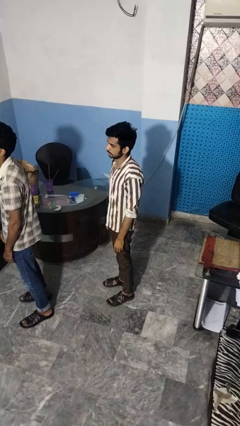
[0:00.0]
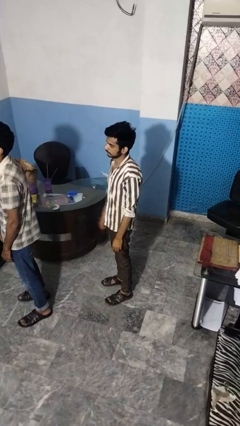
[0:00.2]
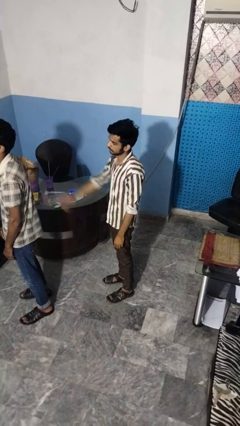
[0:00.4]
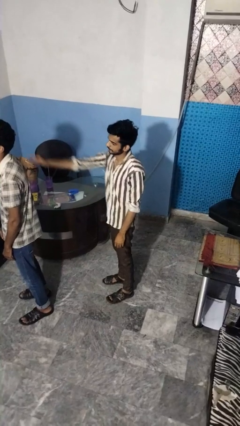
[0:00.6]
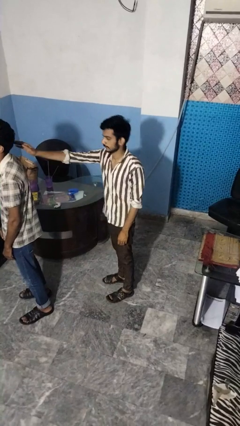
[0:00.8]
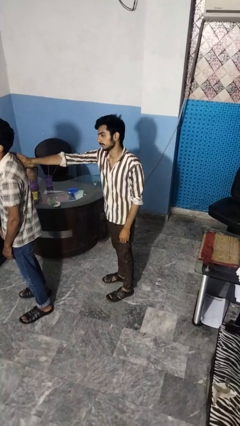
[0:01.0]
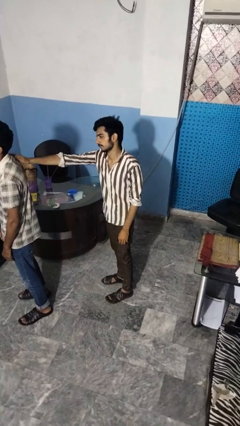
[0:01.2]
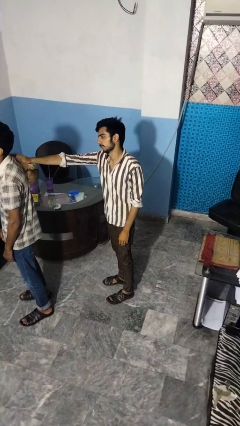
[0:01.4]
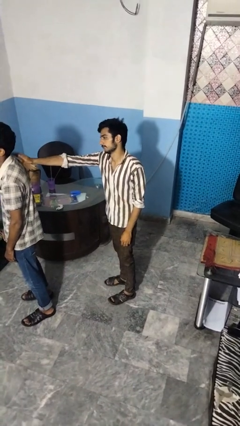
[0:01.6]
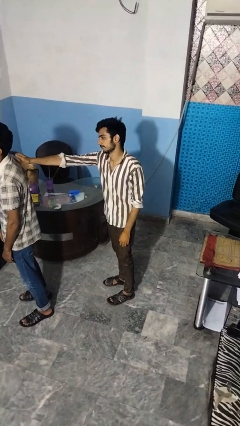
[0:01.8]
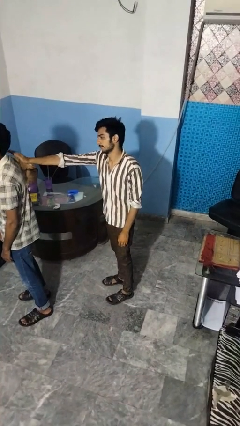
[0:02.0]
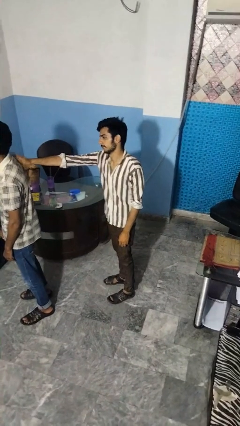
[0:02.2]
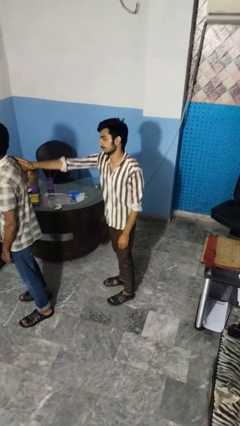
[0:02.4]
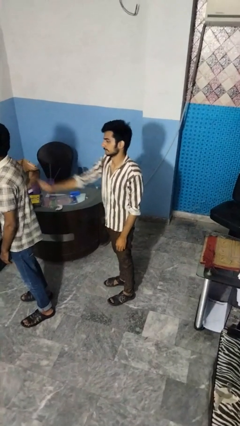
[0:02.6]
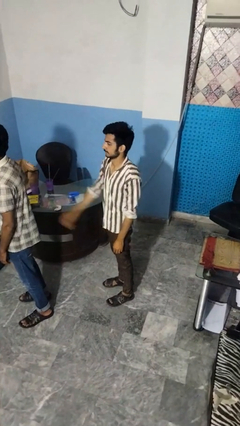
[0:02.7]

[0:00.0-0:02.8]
person touches back of person

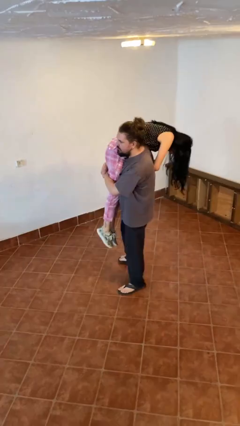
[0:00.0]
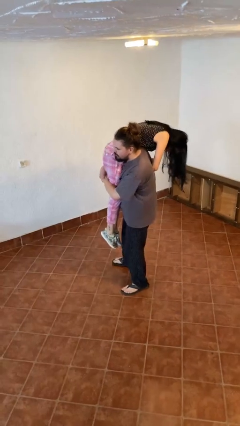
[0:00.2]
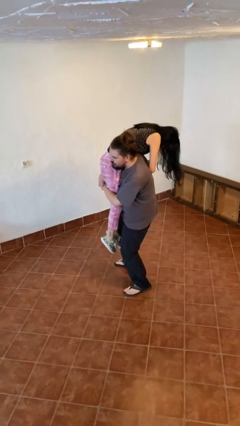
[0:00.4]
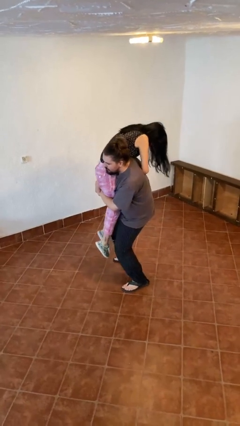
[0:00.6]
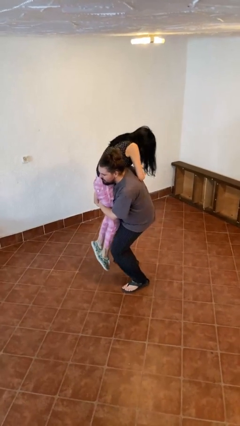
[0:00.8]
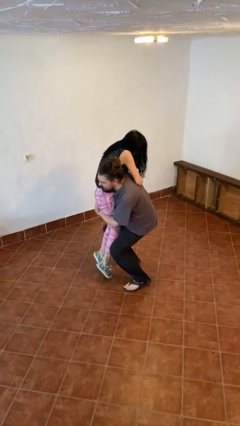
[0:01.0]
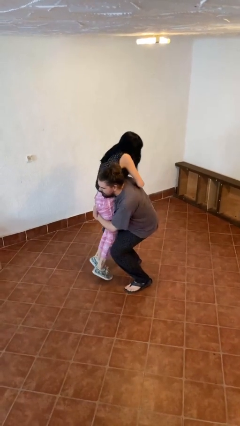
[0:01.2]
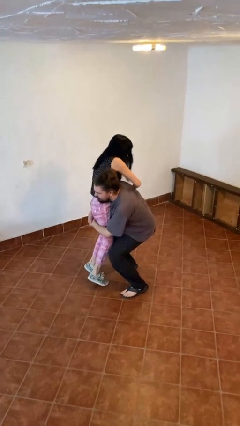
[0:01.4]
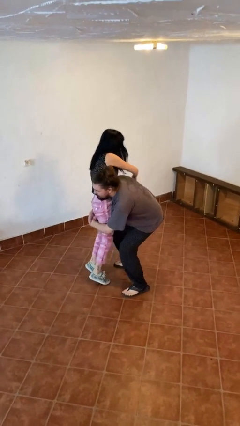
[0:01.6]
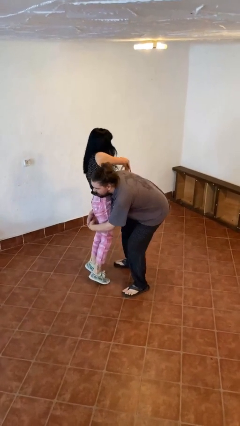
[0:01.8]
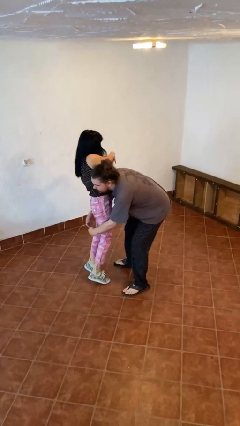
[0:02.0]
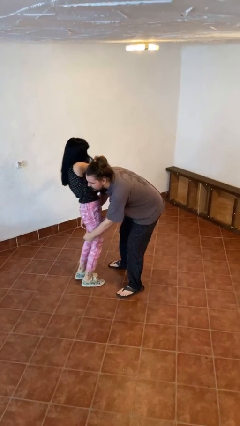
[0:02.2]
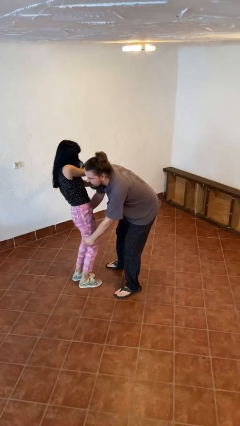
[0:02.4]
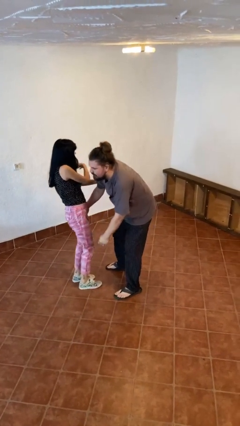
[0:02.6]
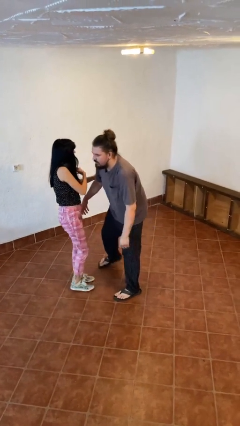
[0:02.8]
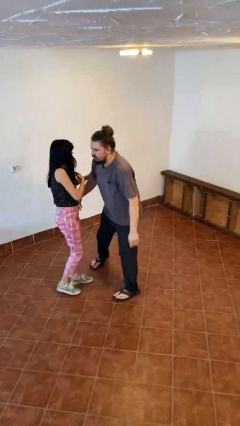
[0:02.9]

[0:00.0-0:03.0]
person puts down person

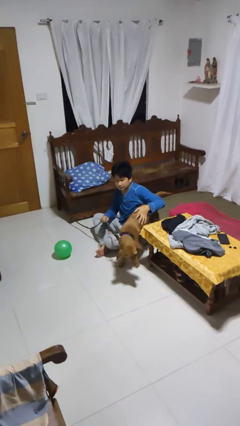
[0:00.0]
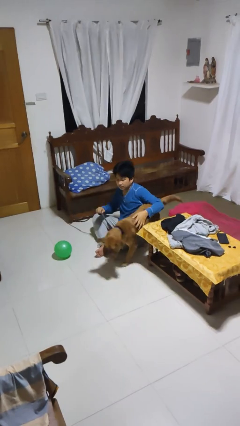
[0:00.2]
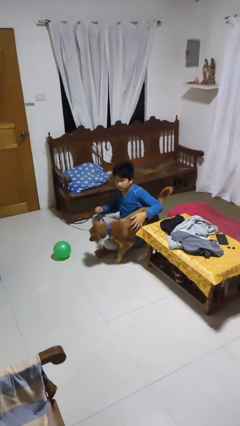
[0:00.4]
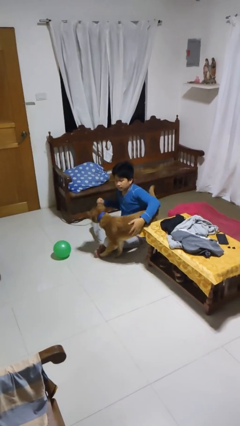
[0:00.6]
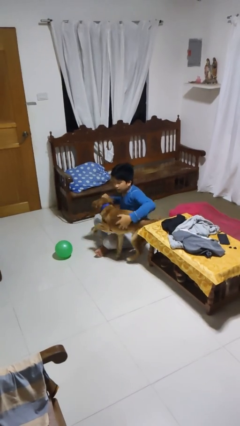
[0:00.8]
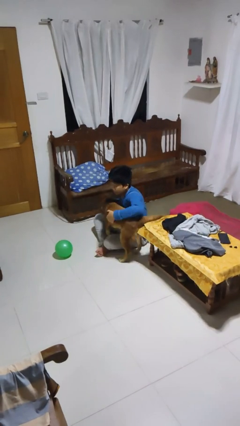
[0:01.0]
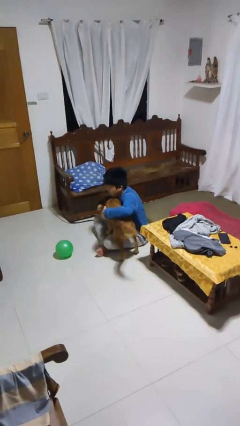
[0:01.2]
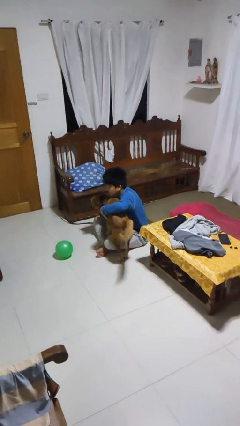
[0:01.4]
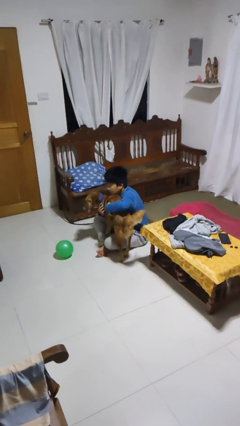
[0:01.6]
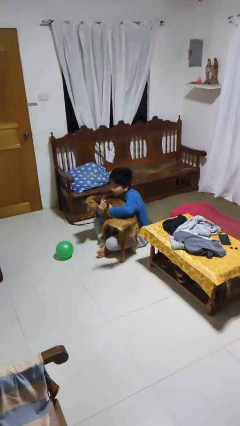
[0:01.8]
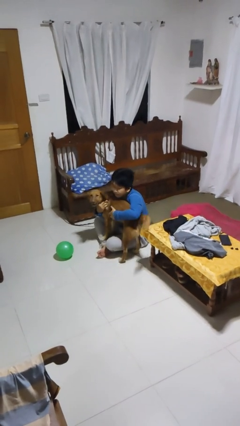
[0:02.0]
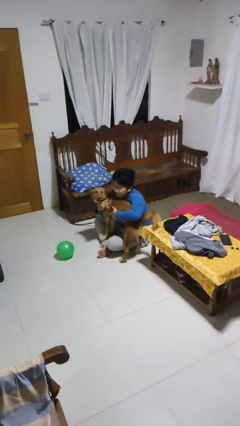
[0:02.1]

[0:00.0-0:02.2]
person hugs dog

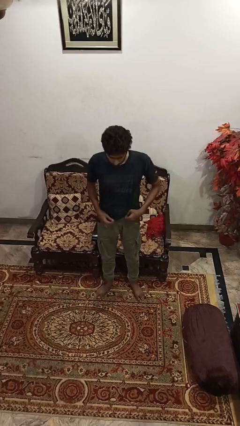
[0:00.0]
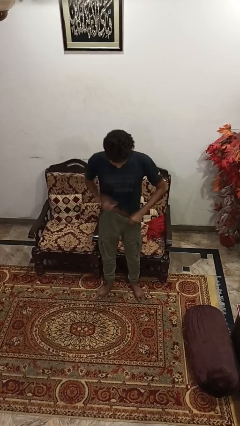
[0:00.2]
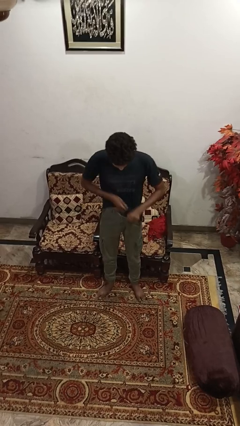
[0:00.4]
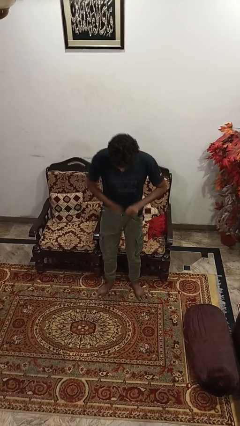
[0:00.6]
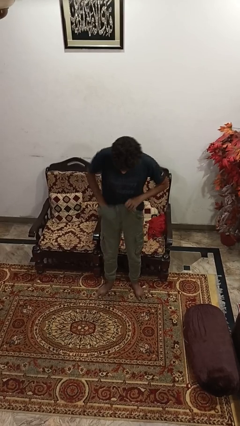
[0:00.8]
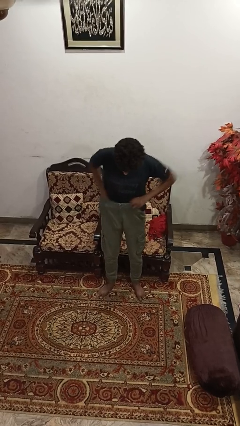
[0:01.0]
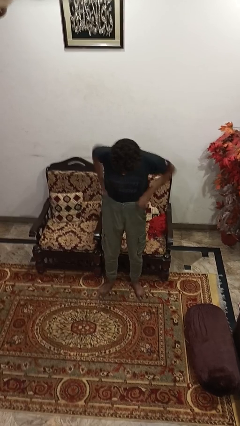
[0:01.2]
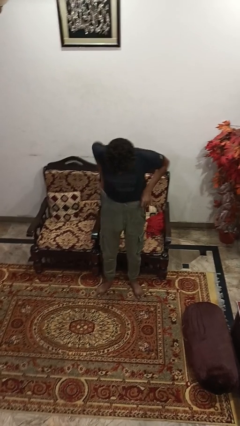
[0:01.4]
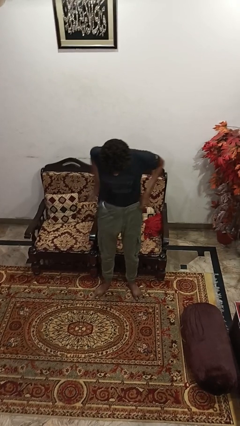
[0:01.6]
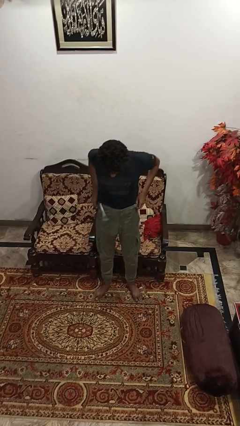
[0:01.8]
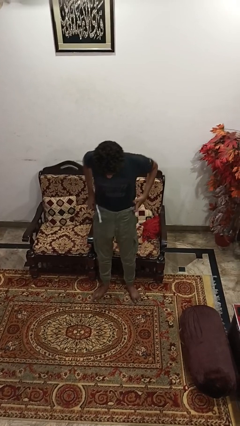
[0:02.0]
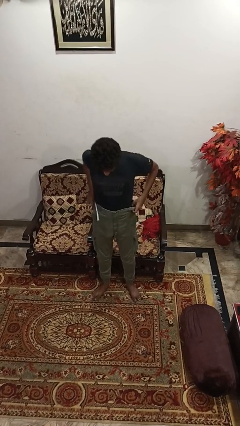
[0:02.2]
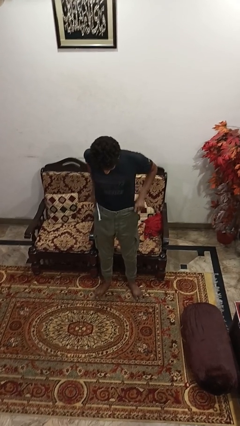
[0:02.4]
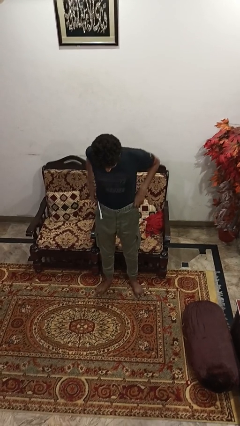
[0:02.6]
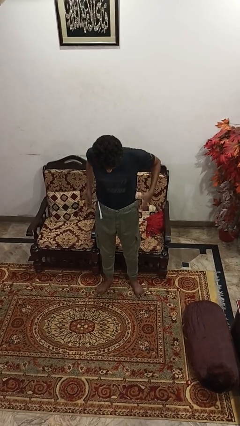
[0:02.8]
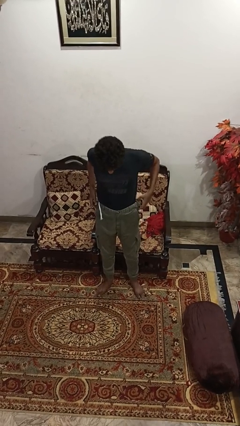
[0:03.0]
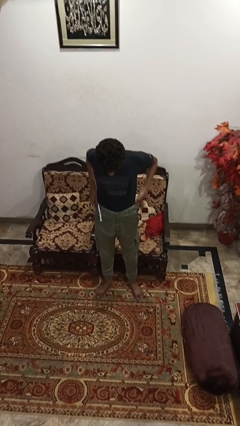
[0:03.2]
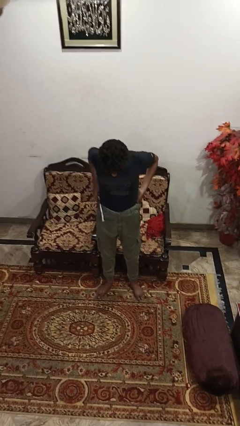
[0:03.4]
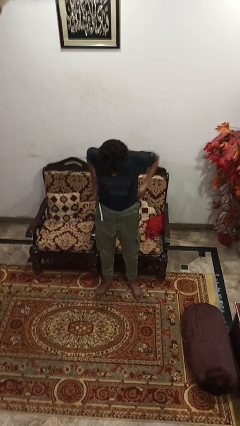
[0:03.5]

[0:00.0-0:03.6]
person tucks in shirt

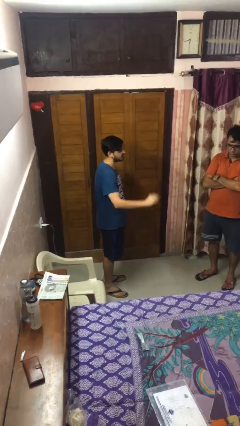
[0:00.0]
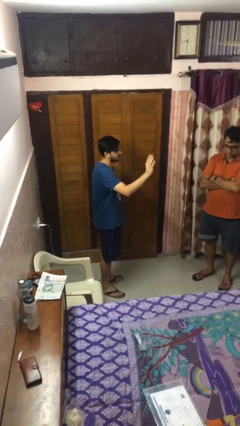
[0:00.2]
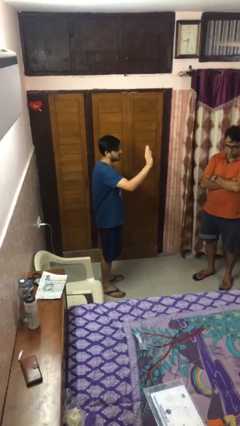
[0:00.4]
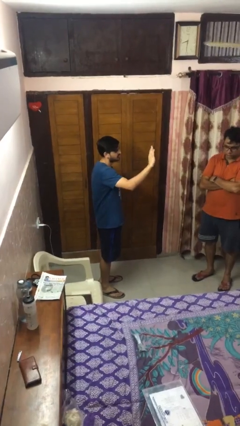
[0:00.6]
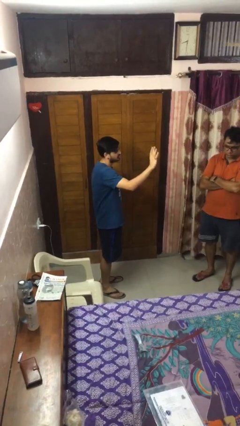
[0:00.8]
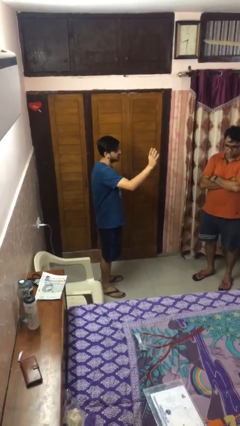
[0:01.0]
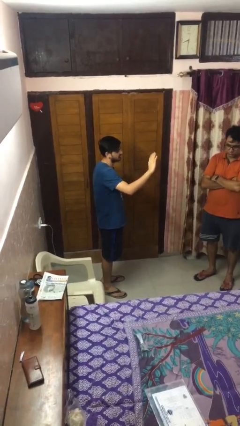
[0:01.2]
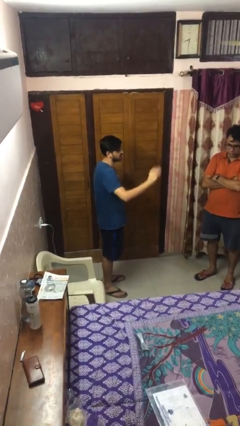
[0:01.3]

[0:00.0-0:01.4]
person waves at person

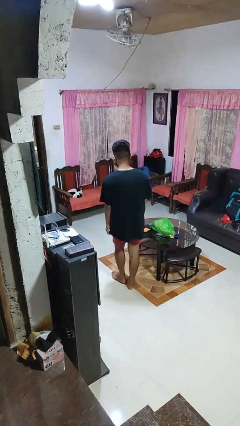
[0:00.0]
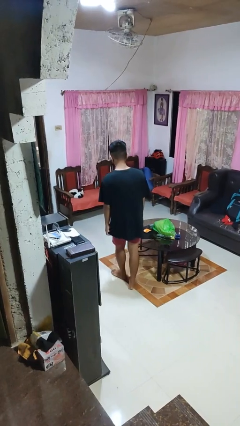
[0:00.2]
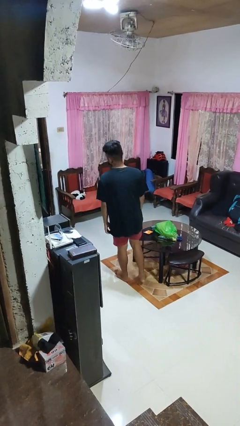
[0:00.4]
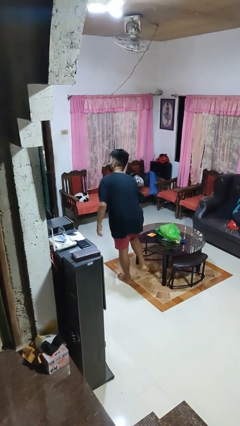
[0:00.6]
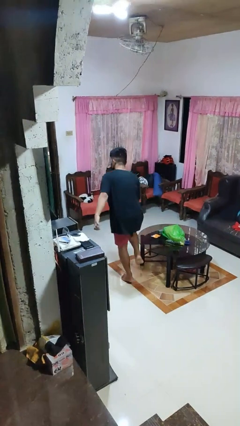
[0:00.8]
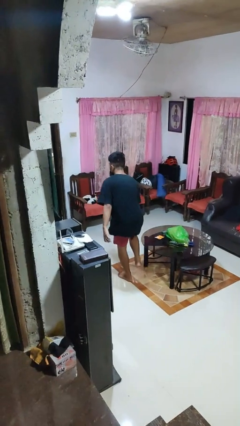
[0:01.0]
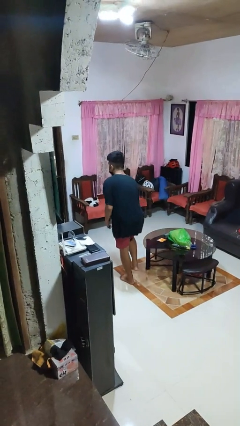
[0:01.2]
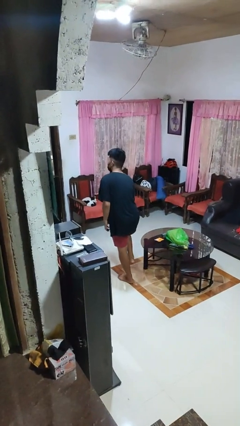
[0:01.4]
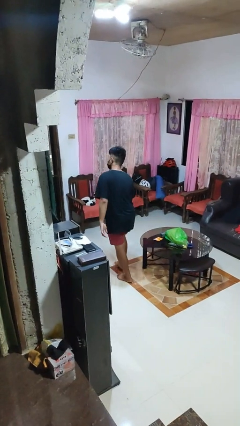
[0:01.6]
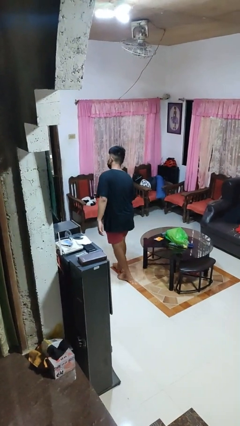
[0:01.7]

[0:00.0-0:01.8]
person bumps into table

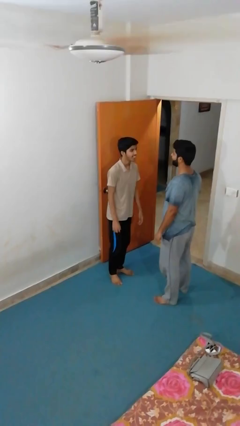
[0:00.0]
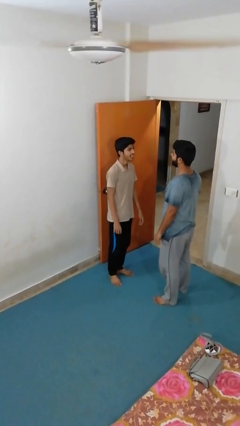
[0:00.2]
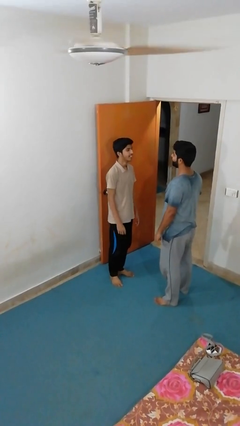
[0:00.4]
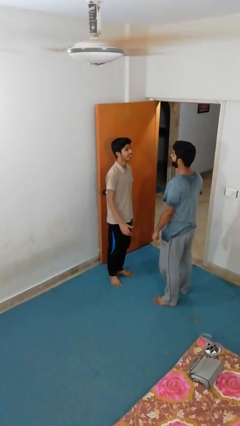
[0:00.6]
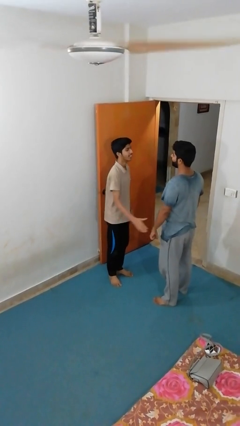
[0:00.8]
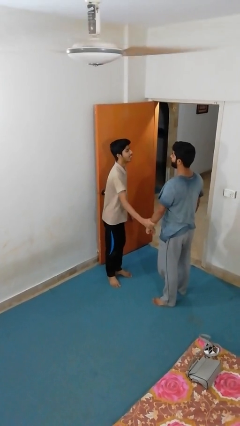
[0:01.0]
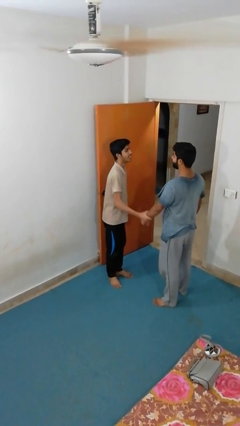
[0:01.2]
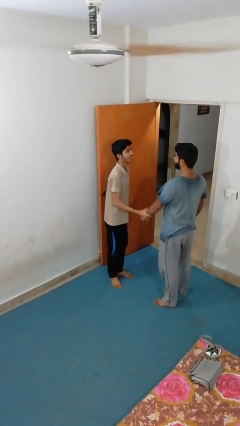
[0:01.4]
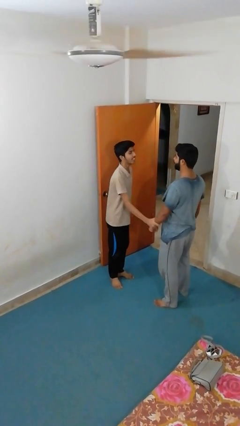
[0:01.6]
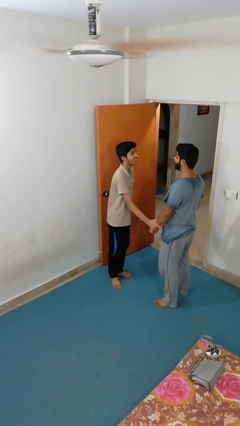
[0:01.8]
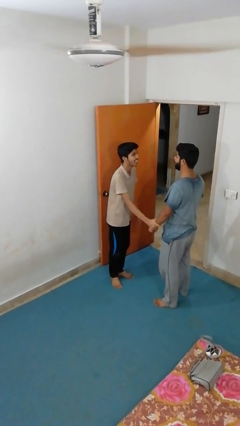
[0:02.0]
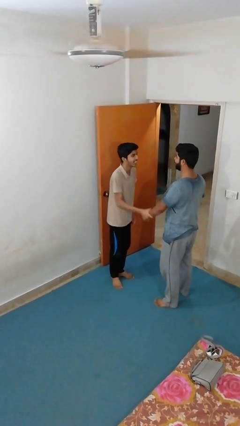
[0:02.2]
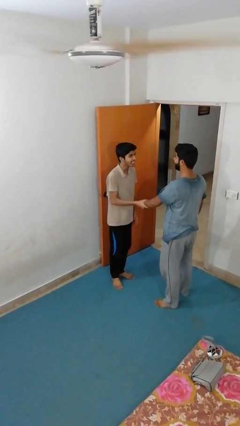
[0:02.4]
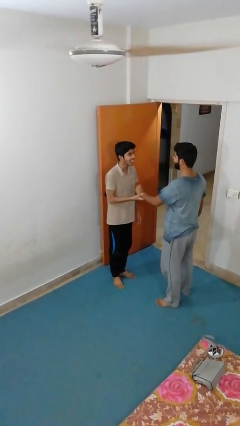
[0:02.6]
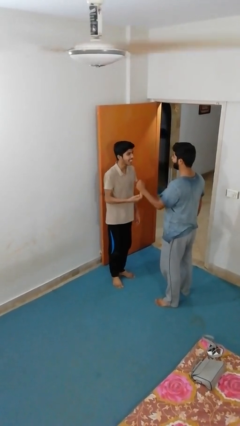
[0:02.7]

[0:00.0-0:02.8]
person grabs person by forearm
